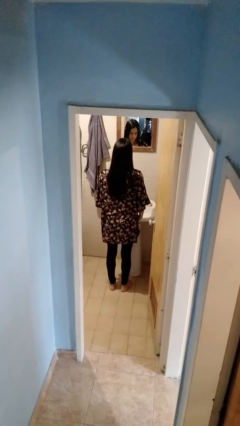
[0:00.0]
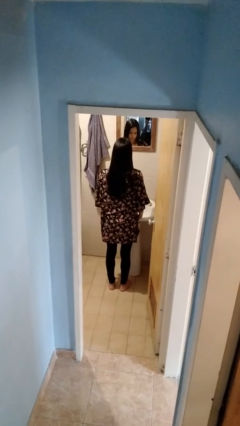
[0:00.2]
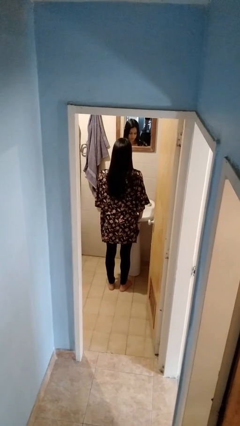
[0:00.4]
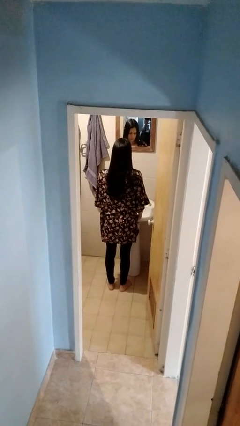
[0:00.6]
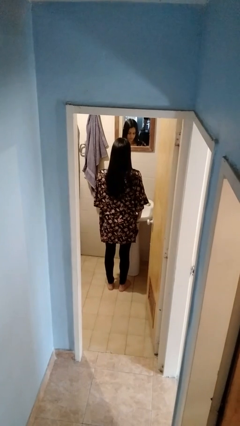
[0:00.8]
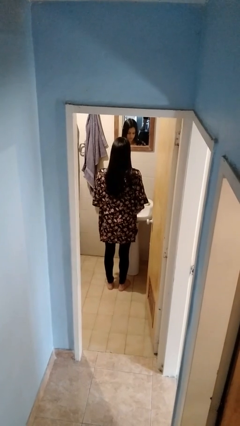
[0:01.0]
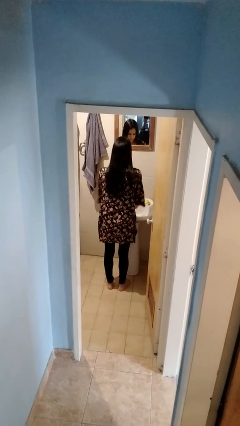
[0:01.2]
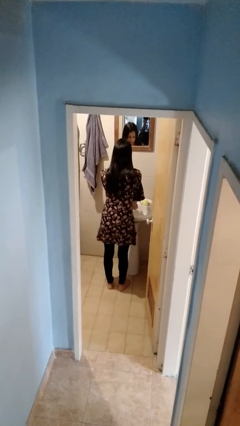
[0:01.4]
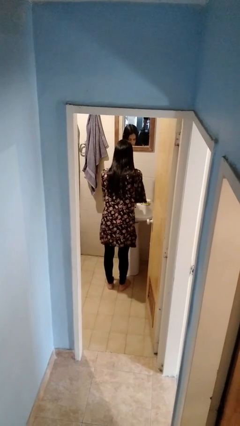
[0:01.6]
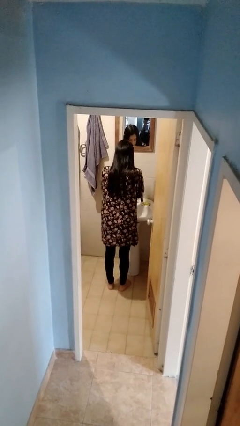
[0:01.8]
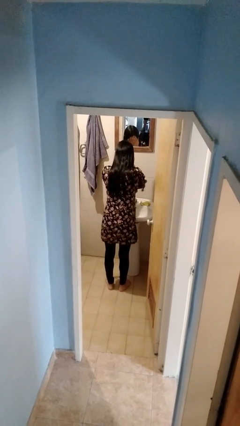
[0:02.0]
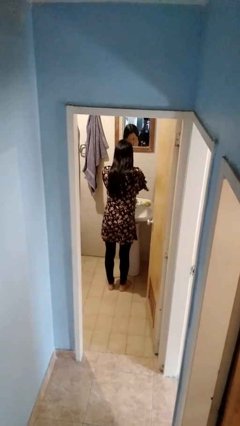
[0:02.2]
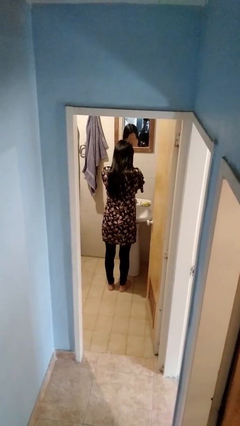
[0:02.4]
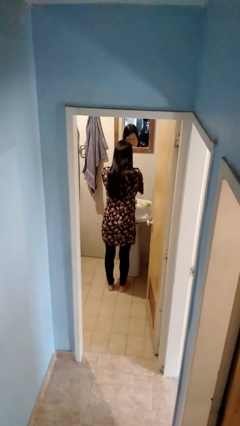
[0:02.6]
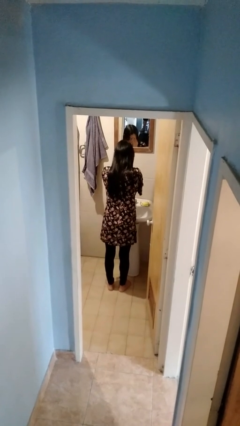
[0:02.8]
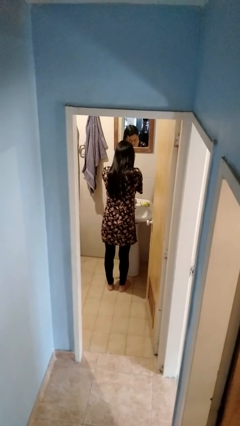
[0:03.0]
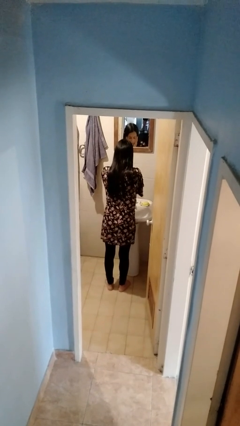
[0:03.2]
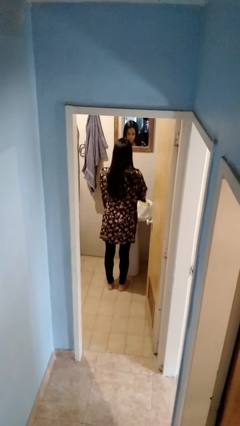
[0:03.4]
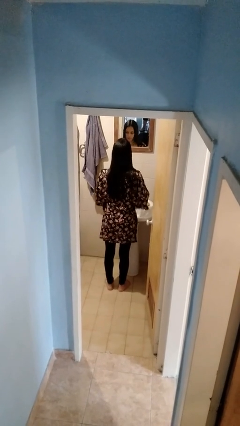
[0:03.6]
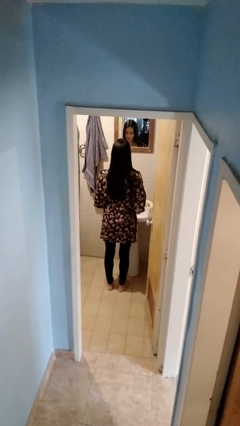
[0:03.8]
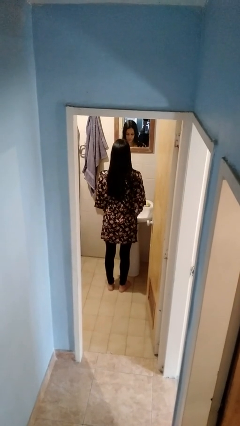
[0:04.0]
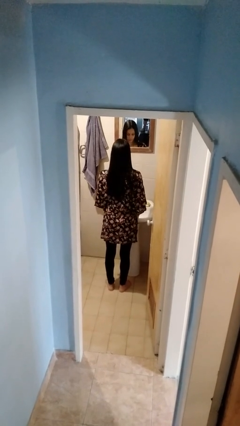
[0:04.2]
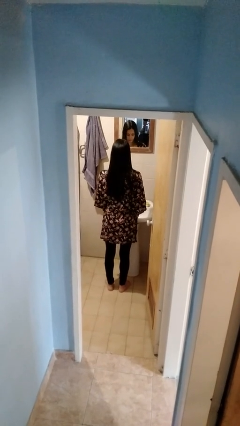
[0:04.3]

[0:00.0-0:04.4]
person washes face

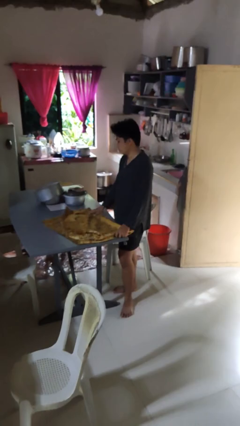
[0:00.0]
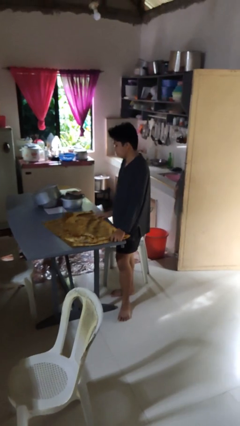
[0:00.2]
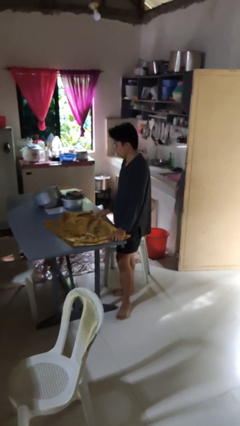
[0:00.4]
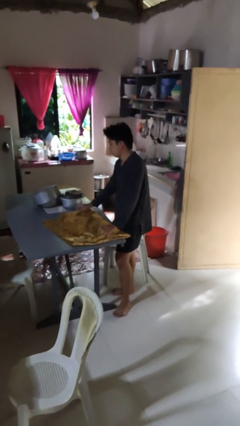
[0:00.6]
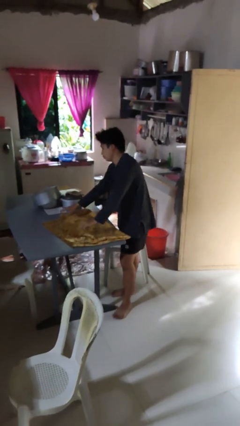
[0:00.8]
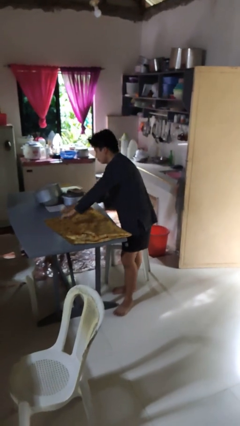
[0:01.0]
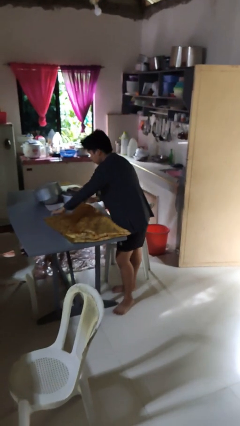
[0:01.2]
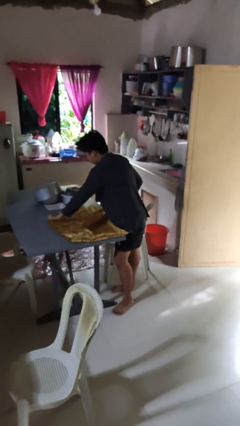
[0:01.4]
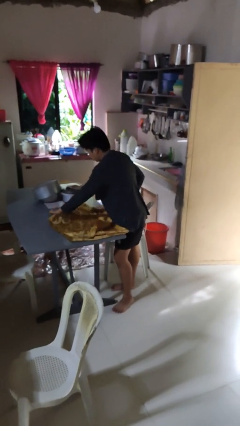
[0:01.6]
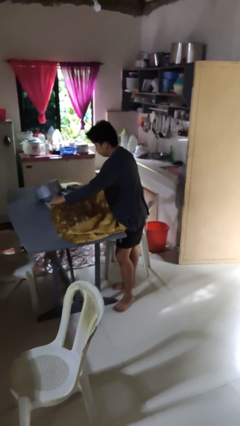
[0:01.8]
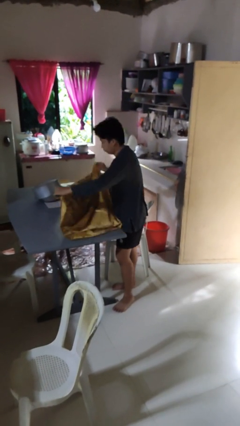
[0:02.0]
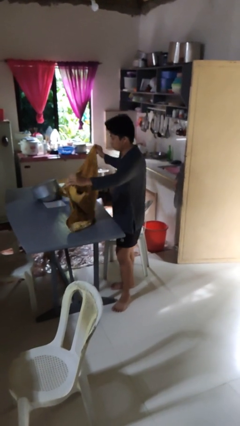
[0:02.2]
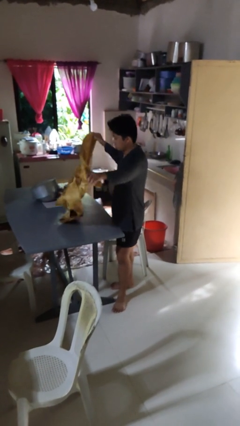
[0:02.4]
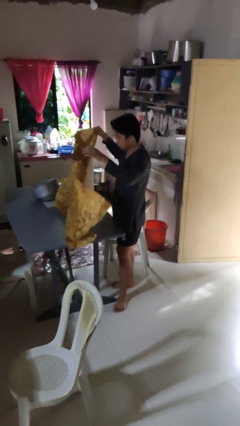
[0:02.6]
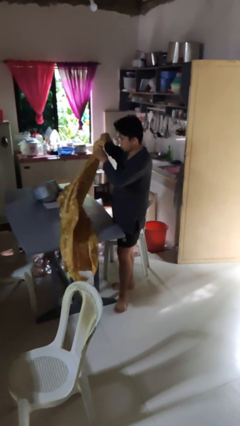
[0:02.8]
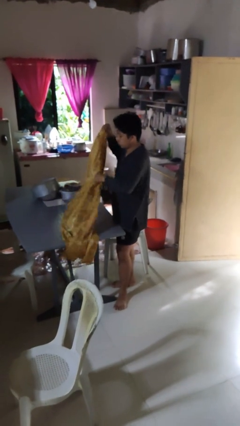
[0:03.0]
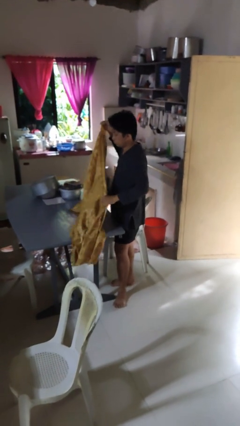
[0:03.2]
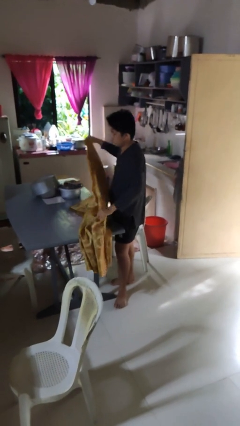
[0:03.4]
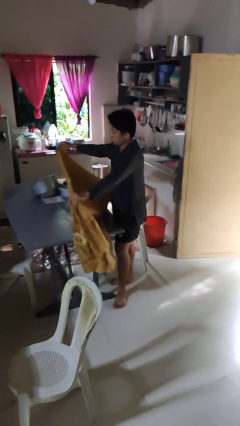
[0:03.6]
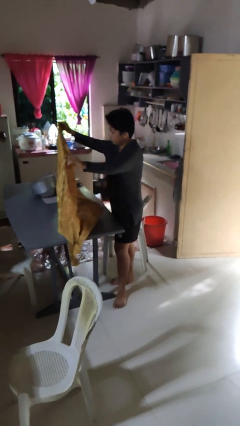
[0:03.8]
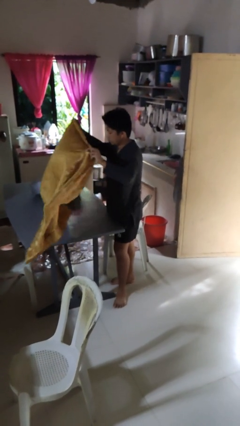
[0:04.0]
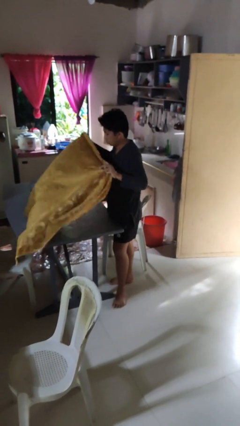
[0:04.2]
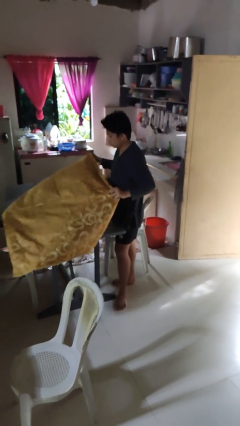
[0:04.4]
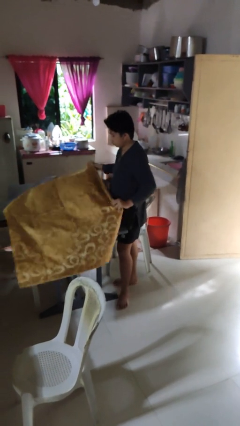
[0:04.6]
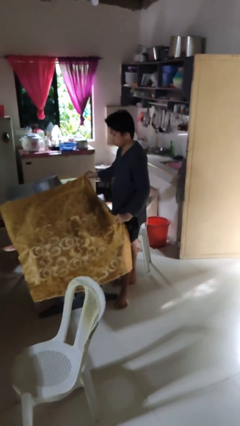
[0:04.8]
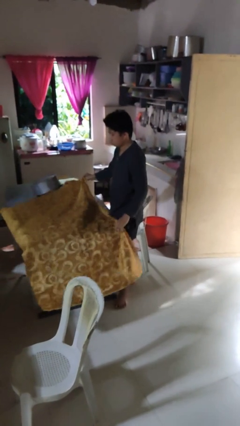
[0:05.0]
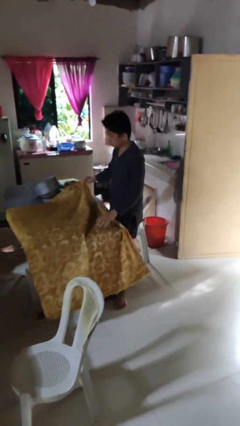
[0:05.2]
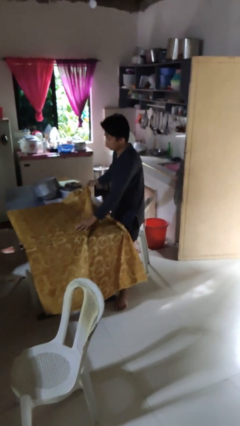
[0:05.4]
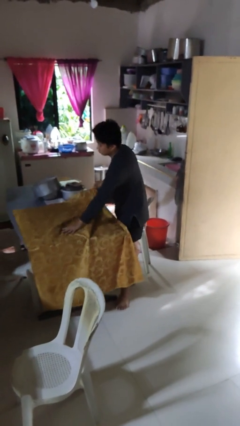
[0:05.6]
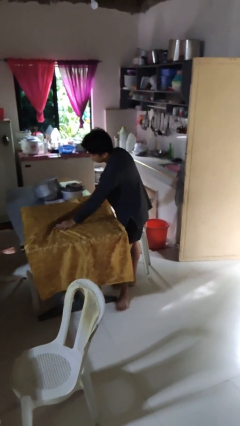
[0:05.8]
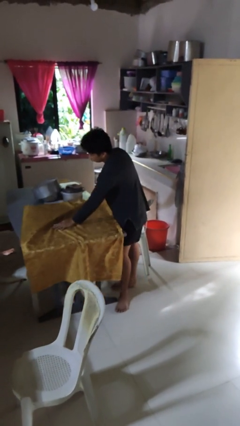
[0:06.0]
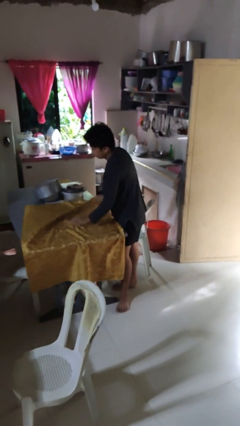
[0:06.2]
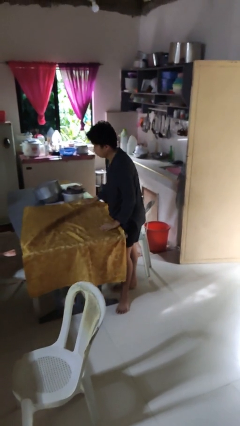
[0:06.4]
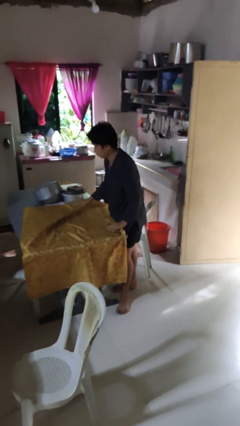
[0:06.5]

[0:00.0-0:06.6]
person spreads tablecloth

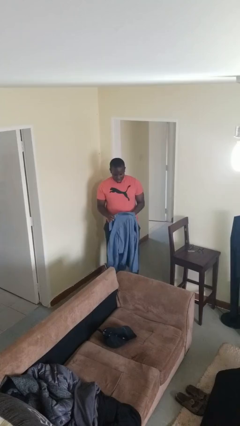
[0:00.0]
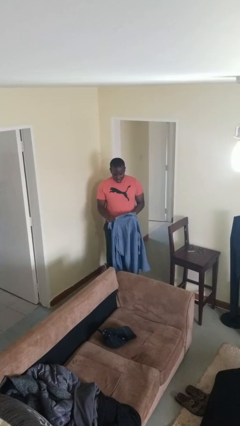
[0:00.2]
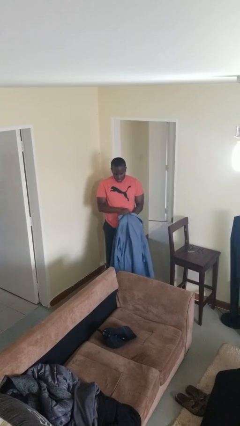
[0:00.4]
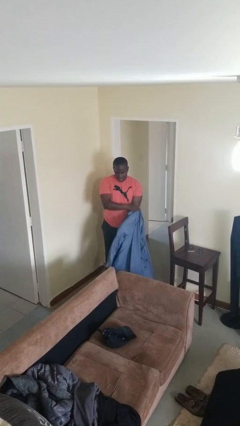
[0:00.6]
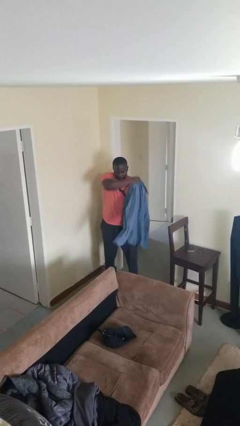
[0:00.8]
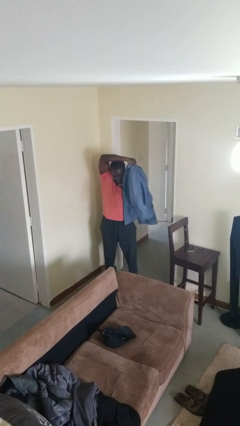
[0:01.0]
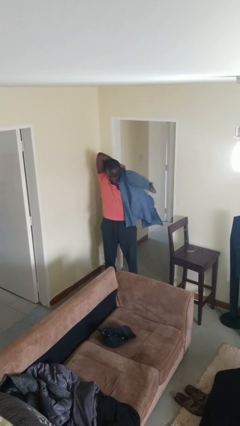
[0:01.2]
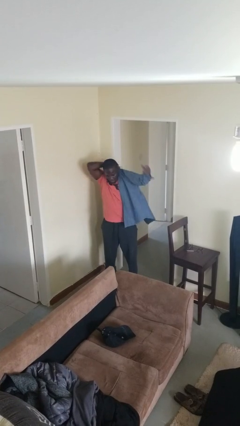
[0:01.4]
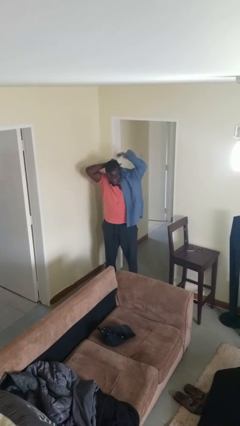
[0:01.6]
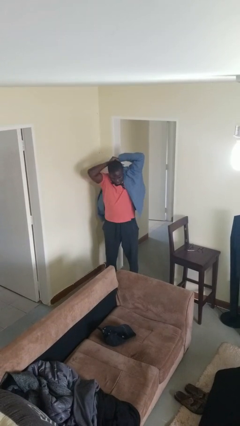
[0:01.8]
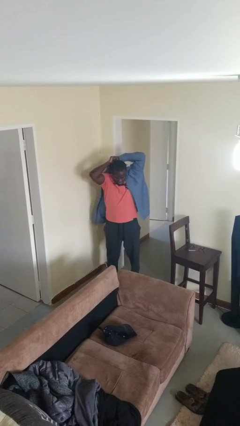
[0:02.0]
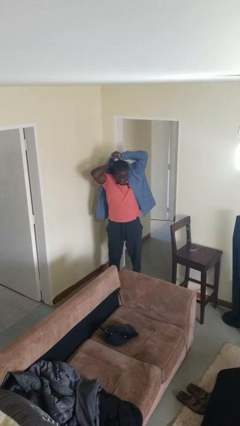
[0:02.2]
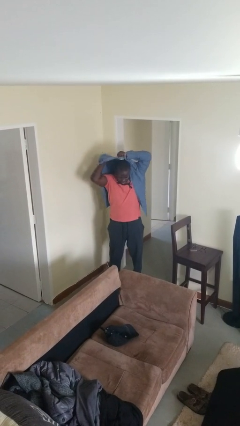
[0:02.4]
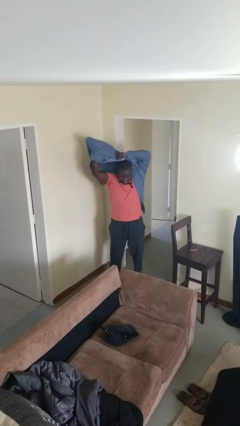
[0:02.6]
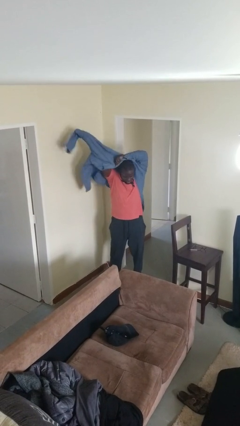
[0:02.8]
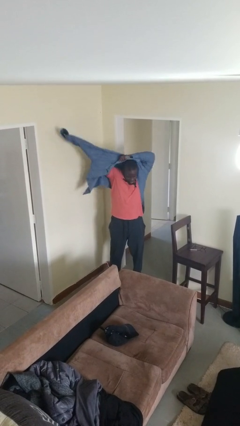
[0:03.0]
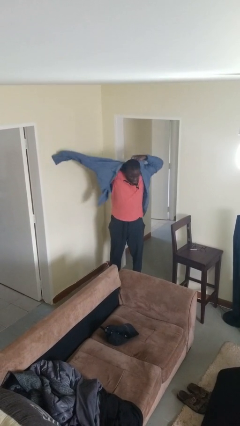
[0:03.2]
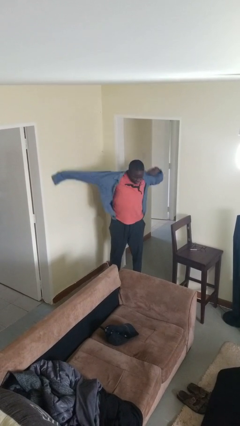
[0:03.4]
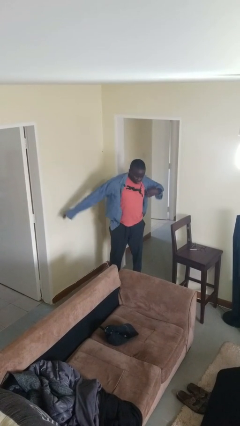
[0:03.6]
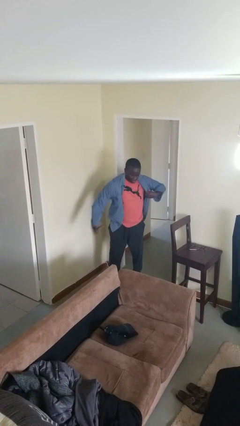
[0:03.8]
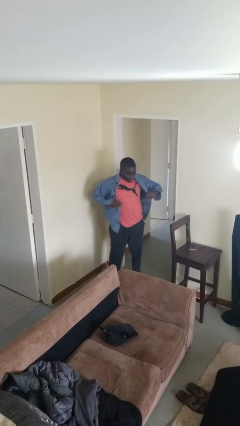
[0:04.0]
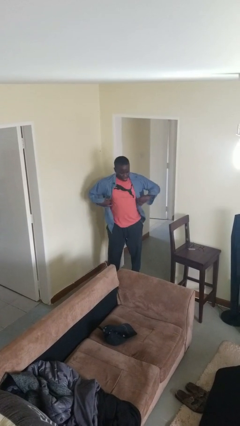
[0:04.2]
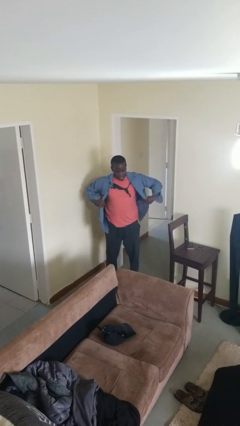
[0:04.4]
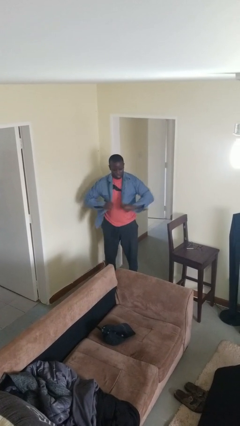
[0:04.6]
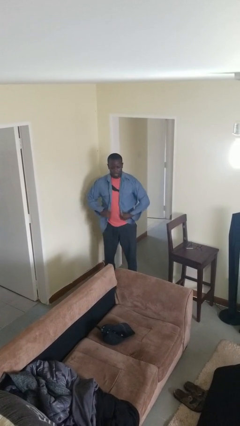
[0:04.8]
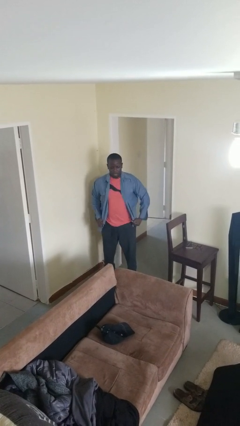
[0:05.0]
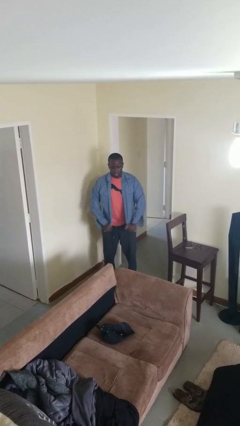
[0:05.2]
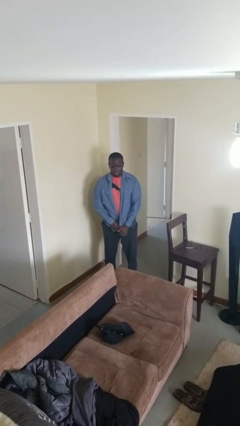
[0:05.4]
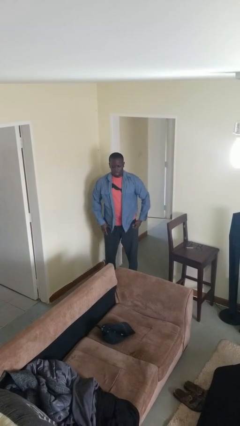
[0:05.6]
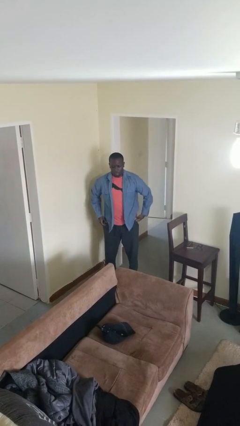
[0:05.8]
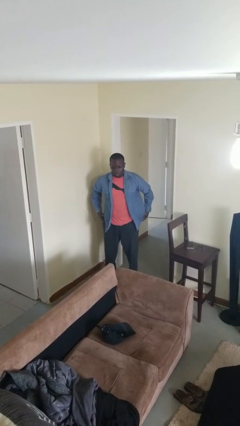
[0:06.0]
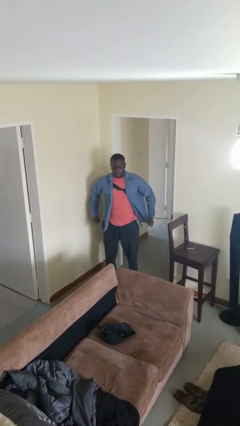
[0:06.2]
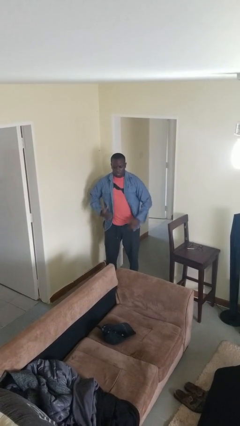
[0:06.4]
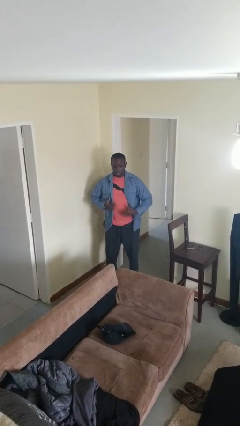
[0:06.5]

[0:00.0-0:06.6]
person puts on shirt

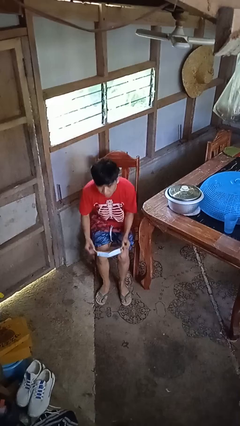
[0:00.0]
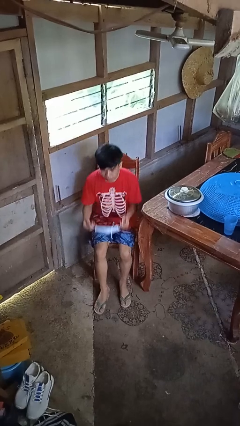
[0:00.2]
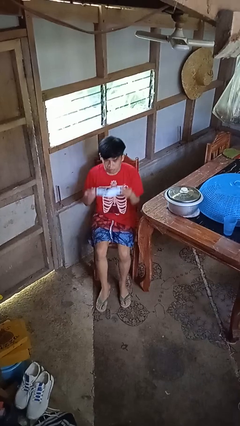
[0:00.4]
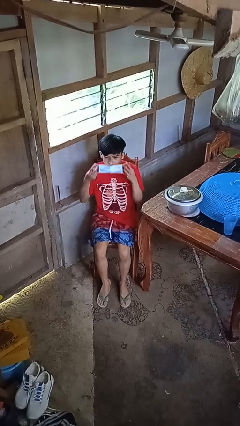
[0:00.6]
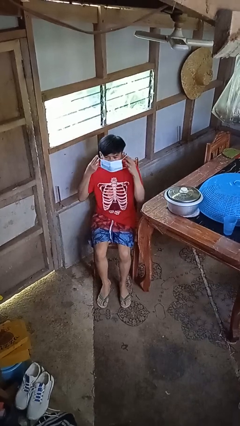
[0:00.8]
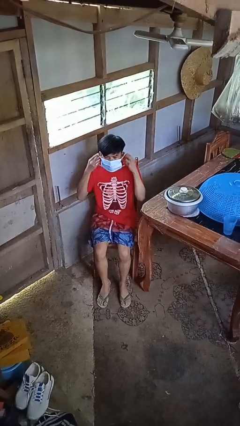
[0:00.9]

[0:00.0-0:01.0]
person puts on facemask
